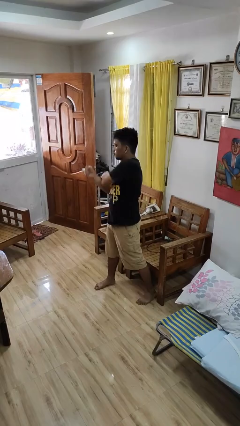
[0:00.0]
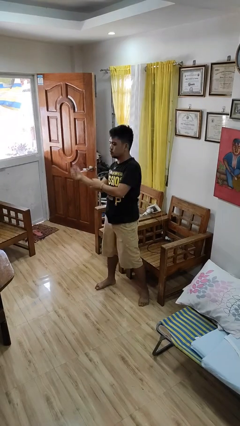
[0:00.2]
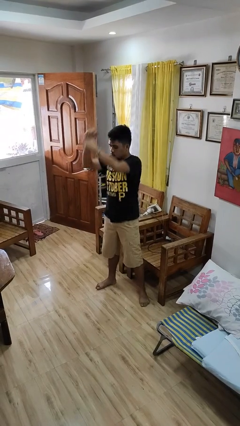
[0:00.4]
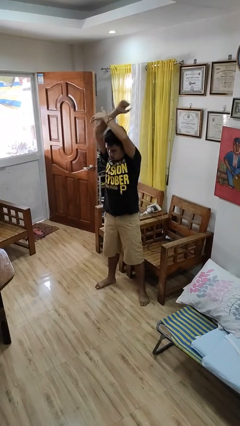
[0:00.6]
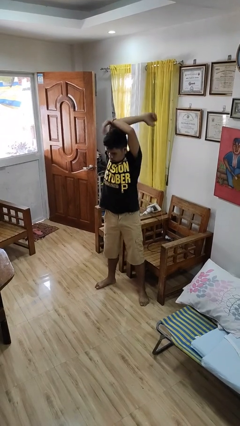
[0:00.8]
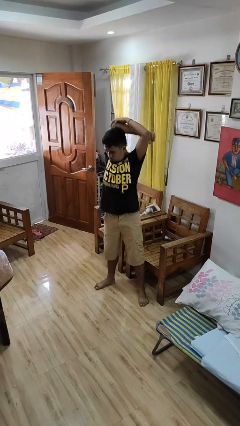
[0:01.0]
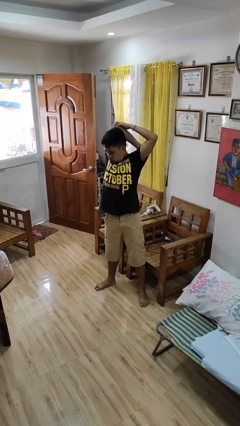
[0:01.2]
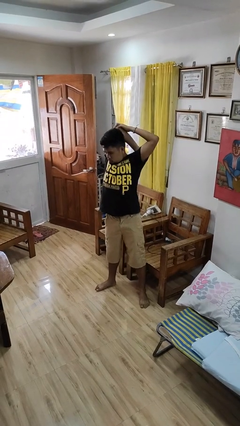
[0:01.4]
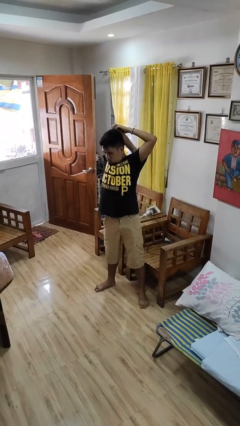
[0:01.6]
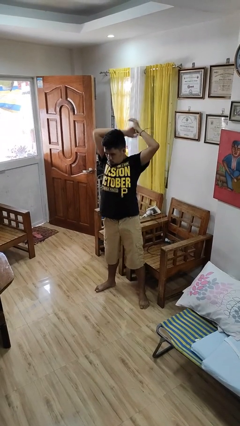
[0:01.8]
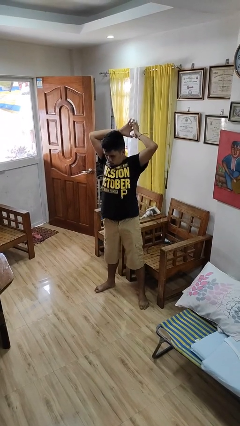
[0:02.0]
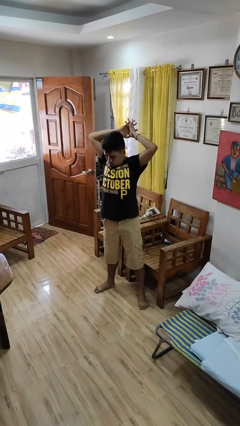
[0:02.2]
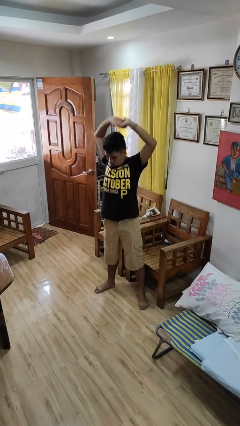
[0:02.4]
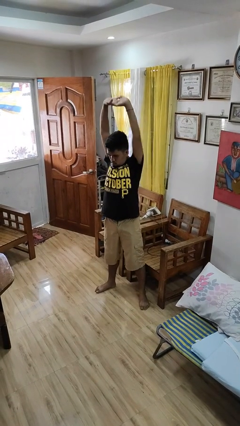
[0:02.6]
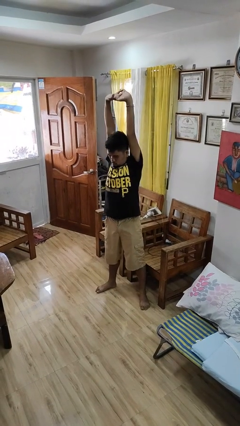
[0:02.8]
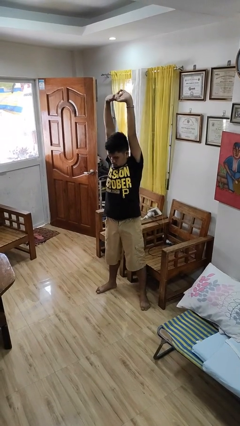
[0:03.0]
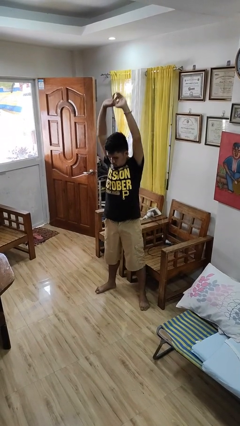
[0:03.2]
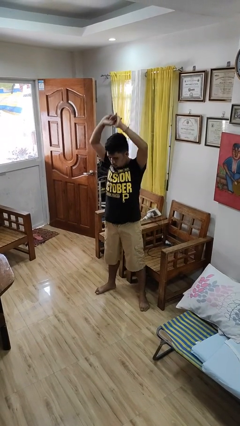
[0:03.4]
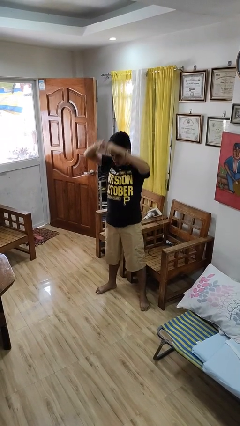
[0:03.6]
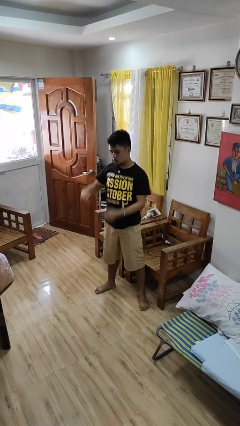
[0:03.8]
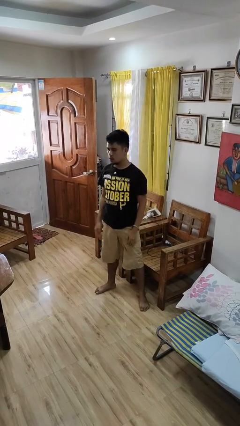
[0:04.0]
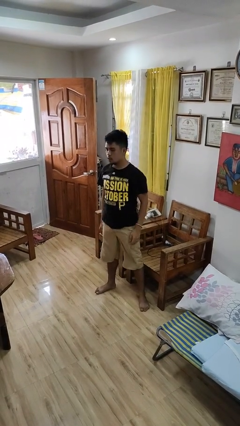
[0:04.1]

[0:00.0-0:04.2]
person stretches arms over head

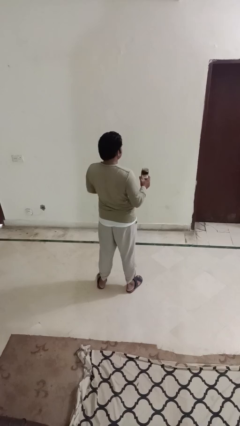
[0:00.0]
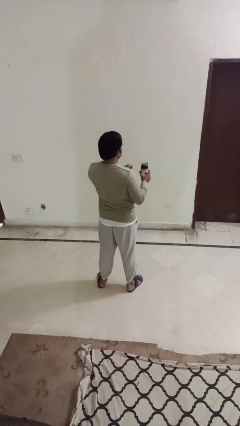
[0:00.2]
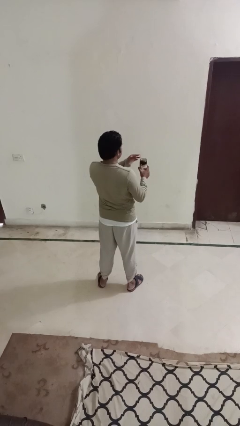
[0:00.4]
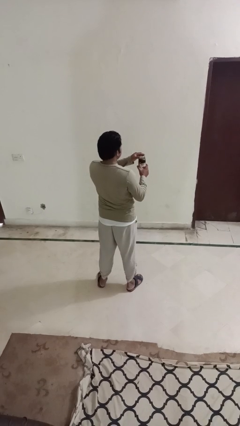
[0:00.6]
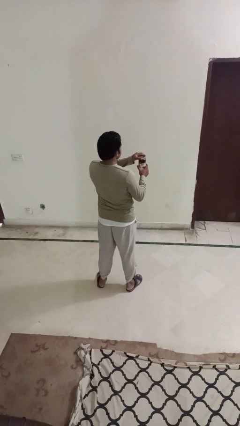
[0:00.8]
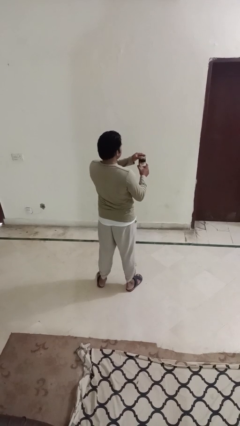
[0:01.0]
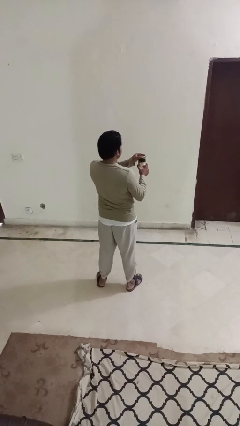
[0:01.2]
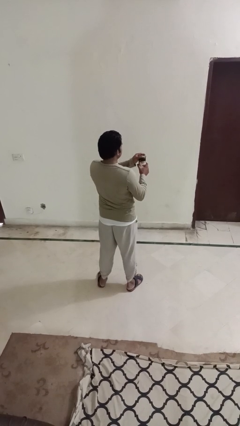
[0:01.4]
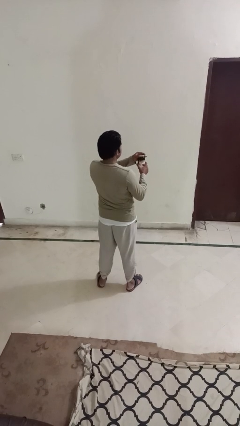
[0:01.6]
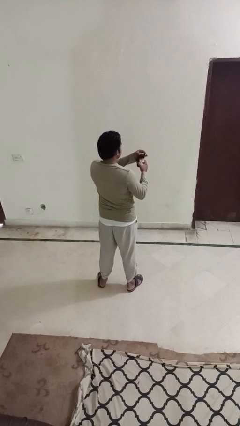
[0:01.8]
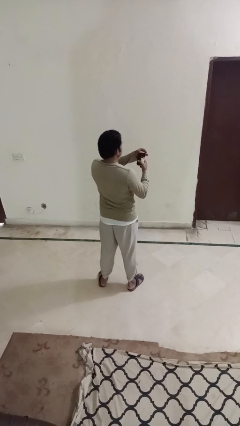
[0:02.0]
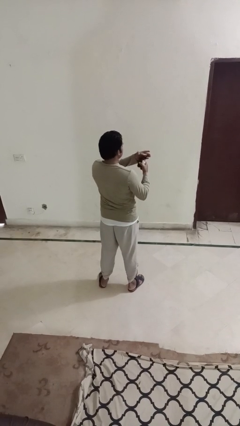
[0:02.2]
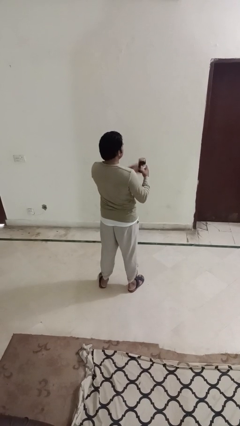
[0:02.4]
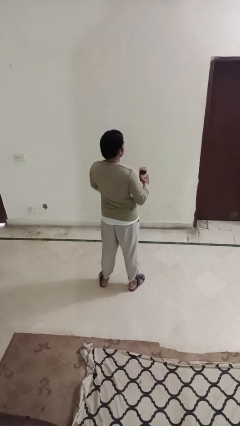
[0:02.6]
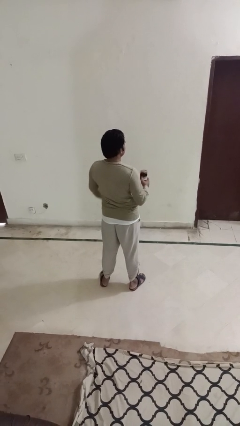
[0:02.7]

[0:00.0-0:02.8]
person closes jar

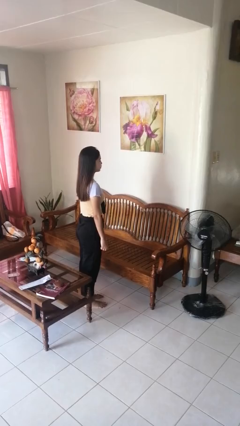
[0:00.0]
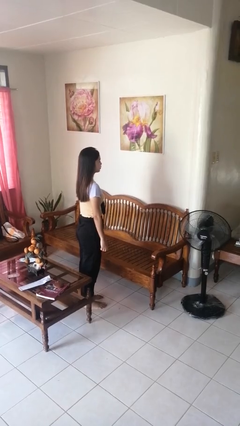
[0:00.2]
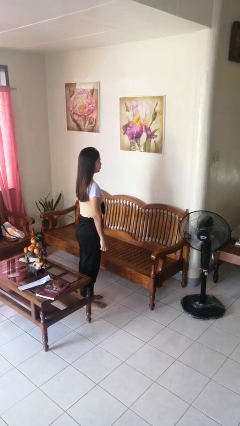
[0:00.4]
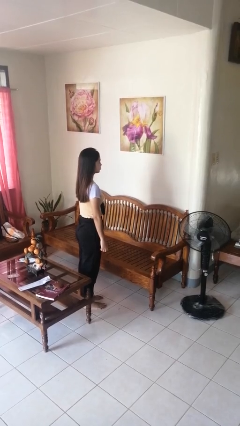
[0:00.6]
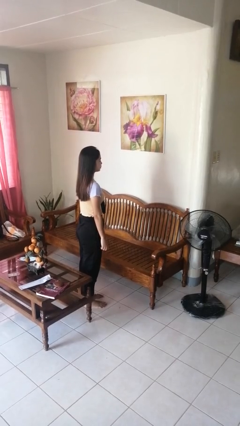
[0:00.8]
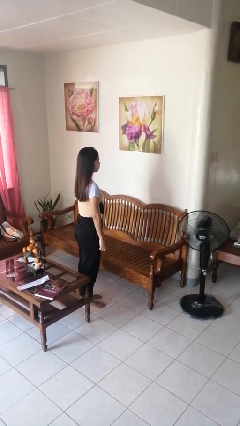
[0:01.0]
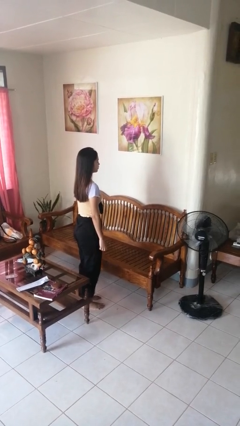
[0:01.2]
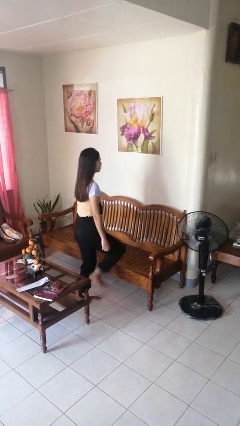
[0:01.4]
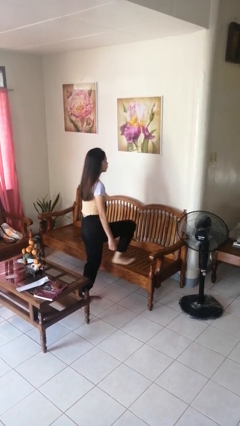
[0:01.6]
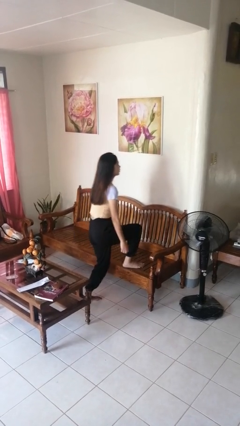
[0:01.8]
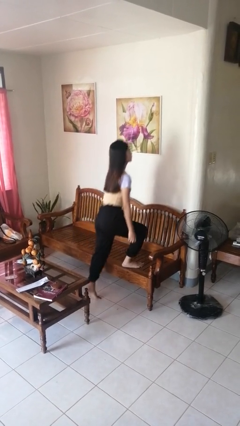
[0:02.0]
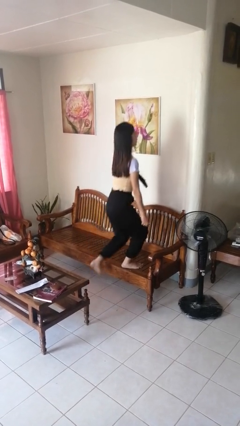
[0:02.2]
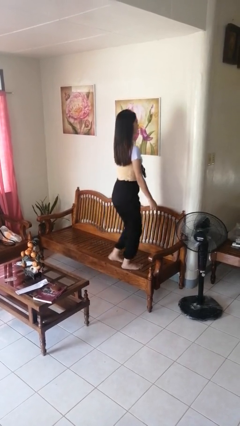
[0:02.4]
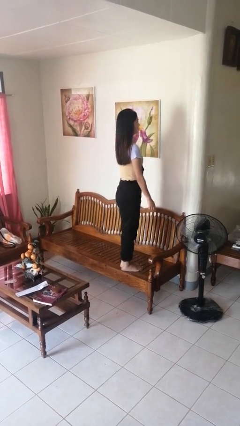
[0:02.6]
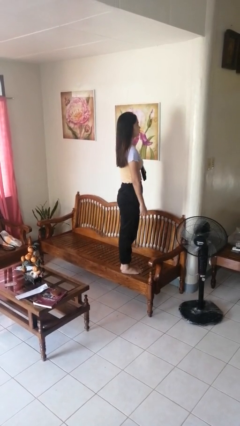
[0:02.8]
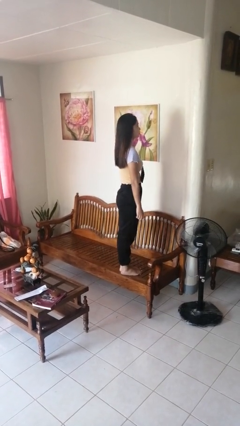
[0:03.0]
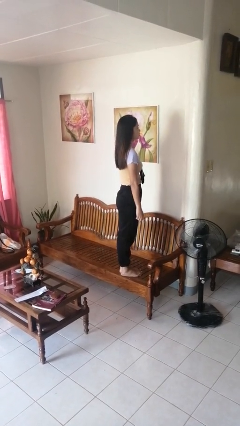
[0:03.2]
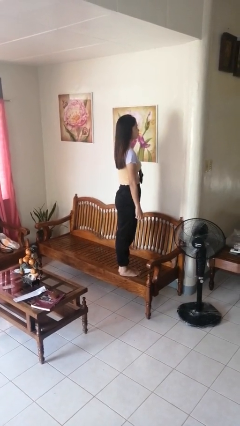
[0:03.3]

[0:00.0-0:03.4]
person climbs on chair

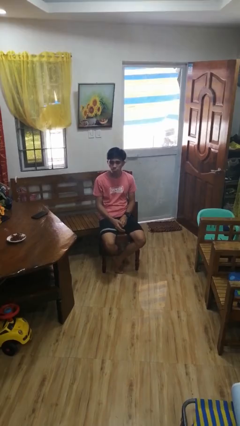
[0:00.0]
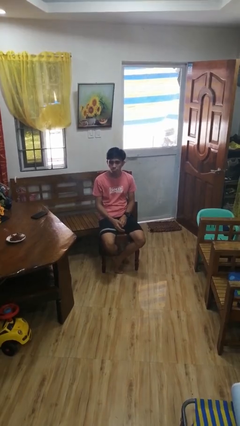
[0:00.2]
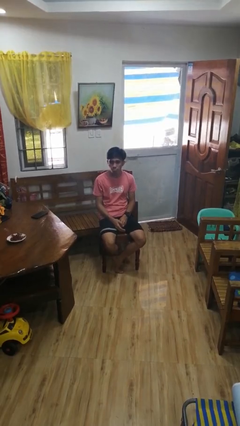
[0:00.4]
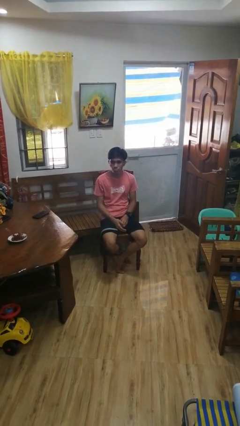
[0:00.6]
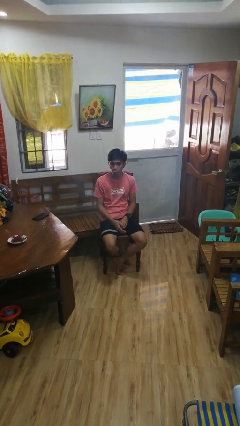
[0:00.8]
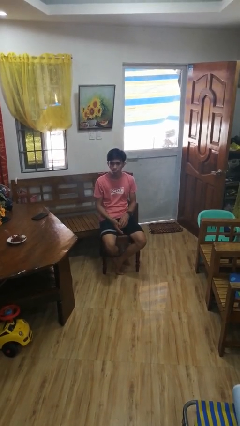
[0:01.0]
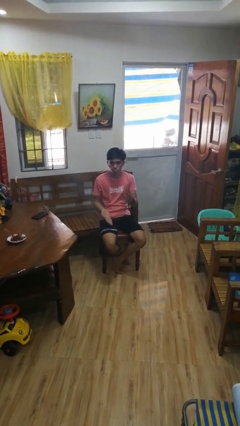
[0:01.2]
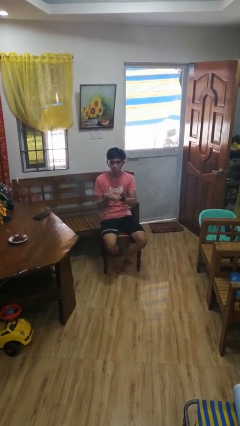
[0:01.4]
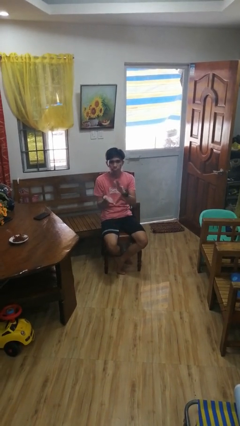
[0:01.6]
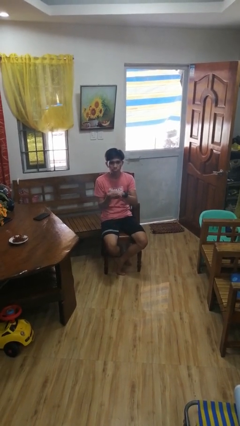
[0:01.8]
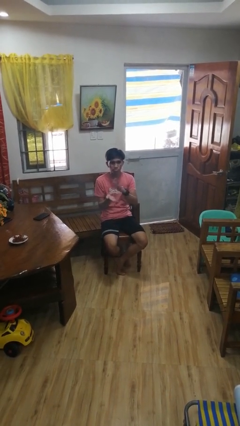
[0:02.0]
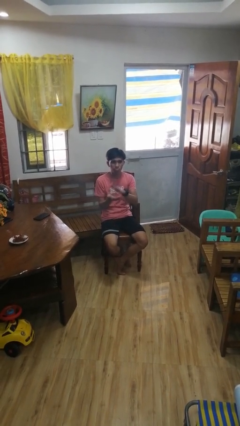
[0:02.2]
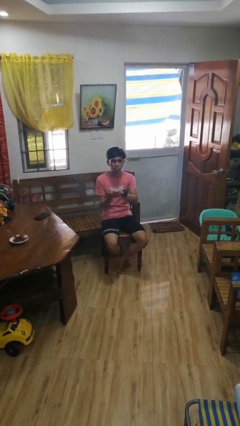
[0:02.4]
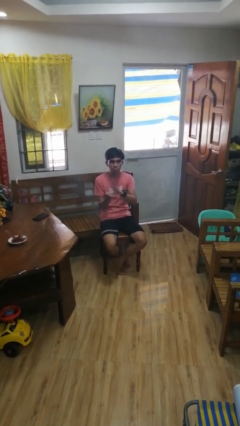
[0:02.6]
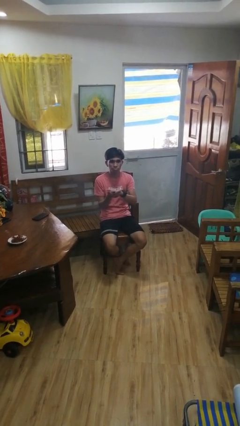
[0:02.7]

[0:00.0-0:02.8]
person claps hands

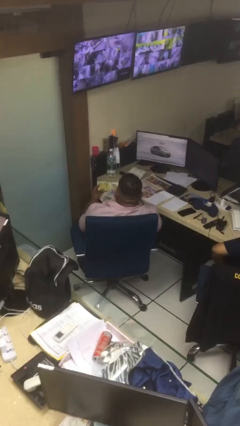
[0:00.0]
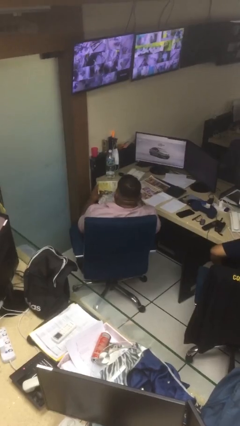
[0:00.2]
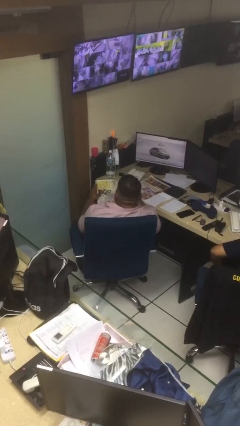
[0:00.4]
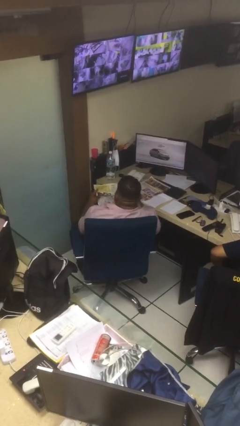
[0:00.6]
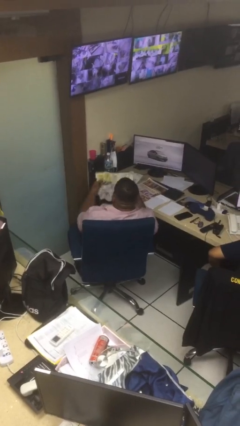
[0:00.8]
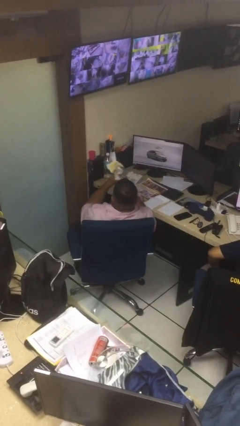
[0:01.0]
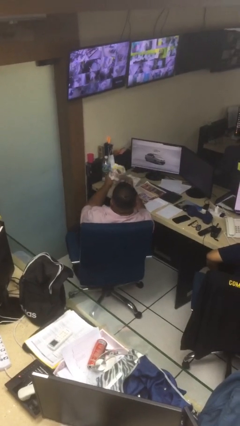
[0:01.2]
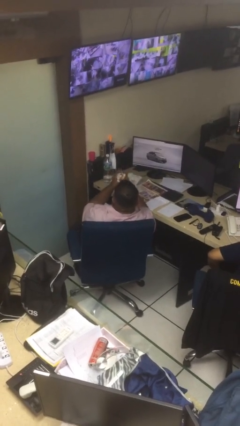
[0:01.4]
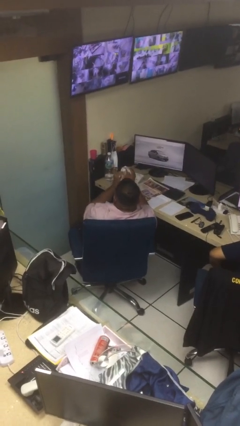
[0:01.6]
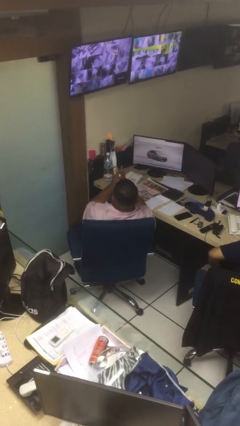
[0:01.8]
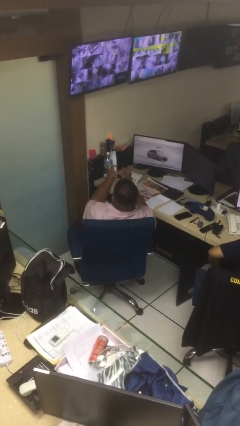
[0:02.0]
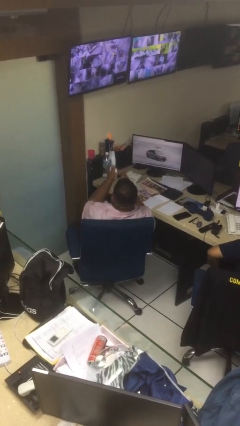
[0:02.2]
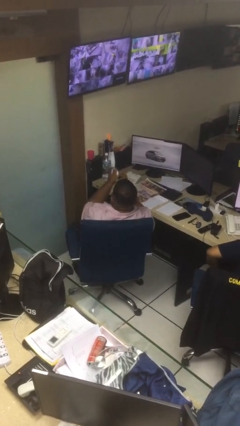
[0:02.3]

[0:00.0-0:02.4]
person crumples paper

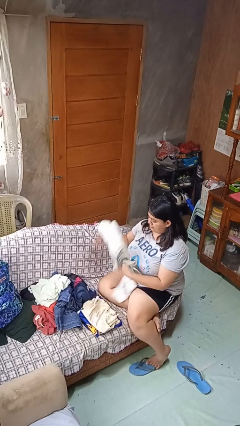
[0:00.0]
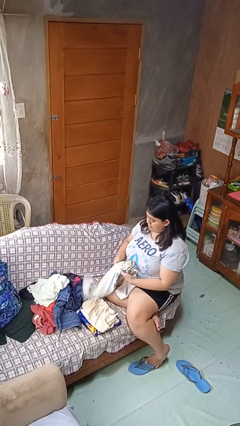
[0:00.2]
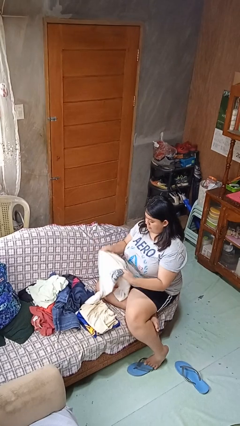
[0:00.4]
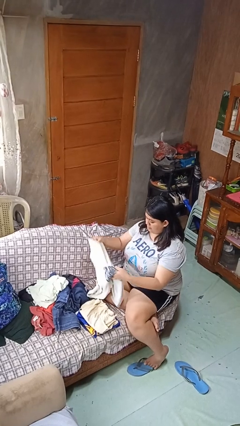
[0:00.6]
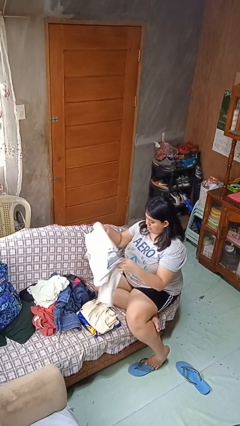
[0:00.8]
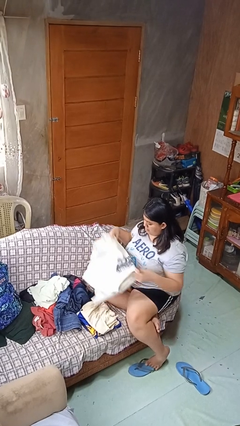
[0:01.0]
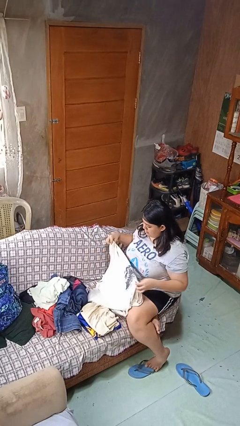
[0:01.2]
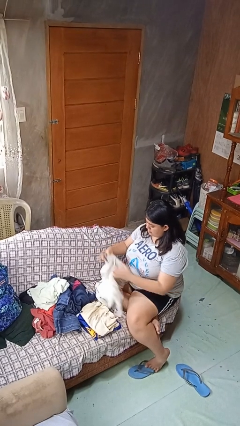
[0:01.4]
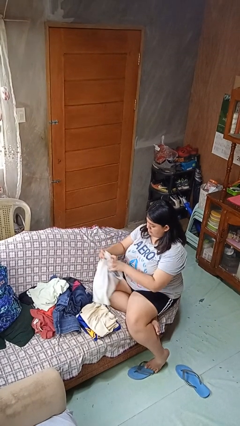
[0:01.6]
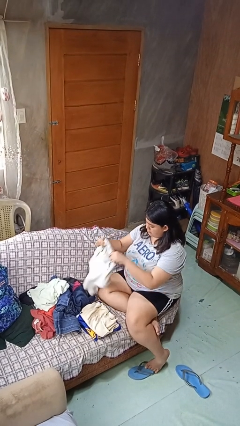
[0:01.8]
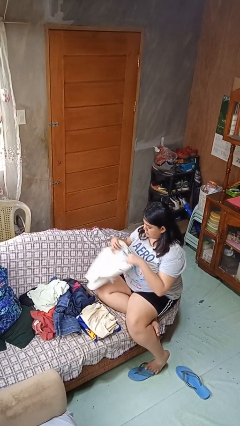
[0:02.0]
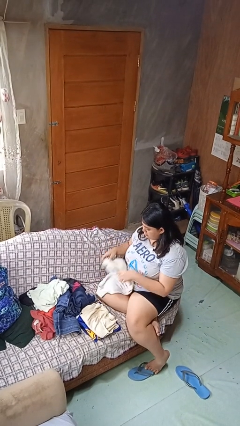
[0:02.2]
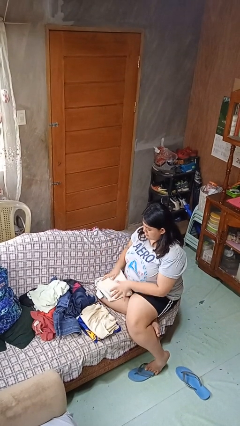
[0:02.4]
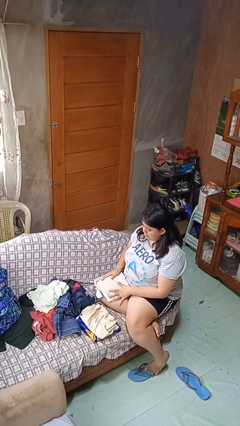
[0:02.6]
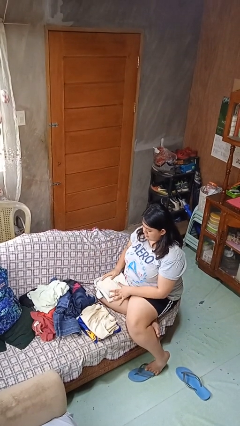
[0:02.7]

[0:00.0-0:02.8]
person folds shirt
